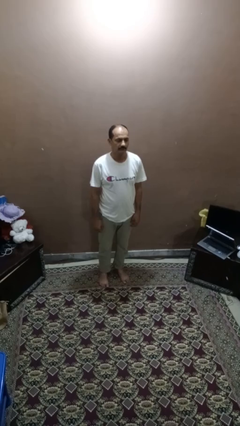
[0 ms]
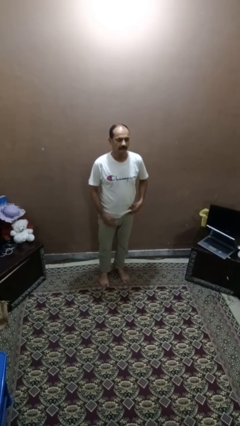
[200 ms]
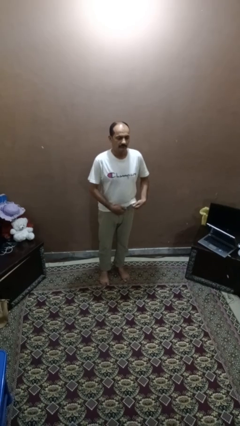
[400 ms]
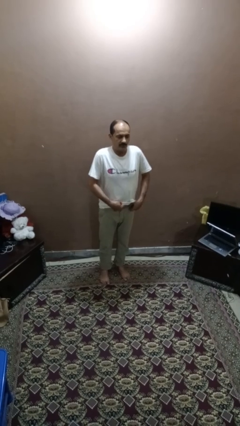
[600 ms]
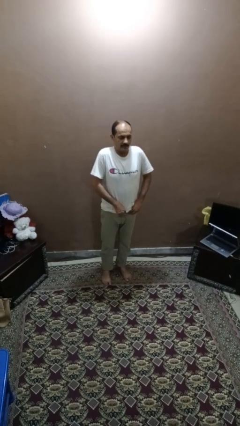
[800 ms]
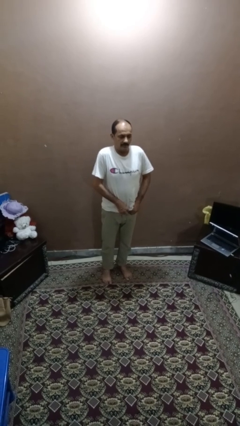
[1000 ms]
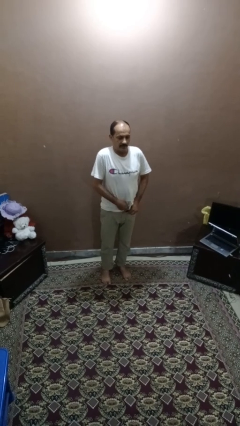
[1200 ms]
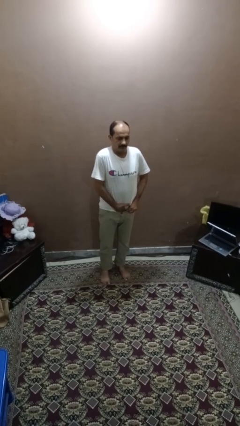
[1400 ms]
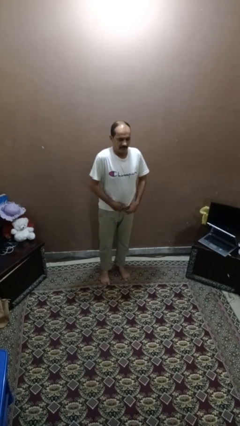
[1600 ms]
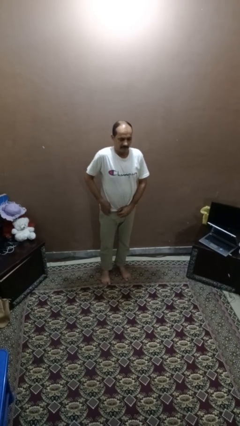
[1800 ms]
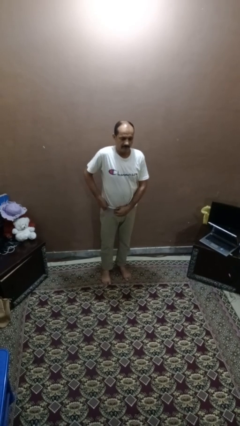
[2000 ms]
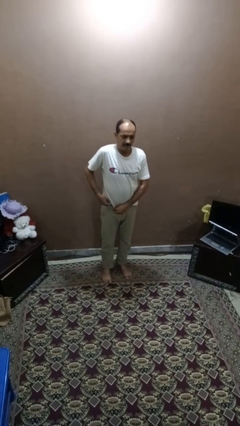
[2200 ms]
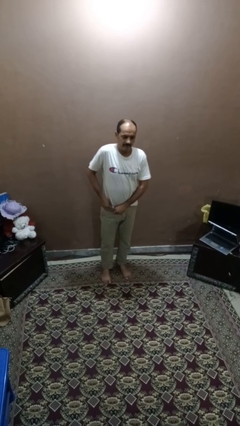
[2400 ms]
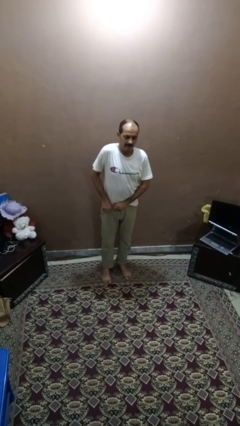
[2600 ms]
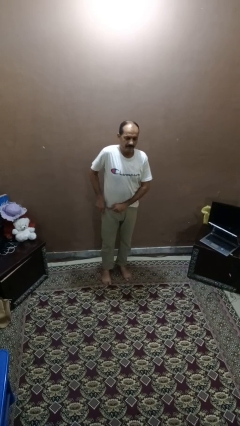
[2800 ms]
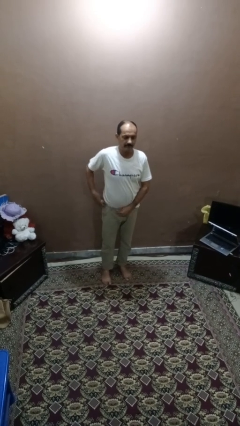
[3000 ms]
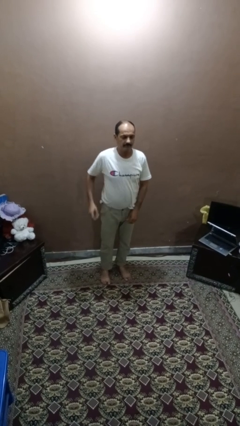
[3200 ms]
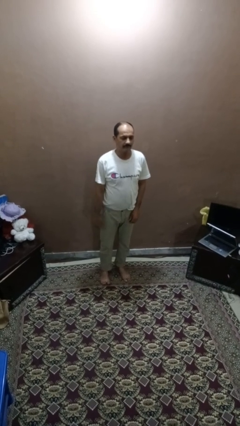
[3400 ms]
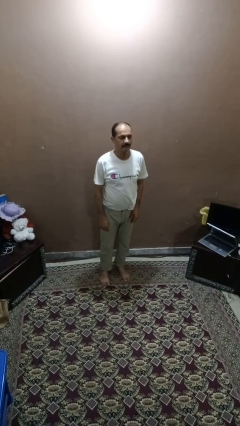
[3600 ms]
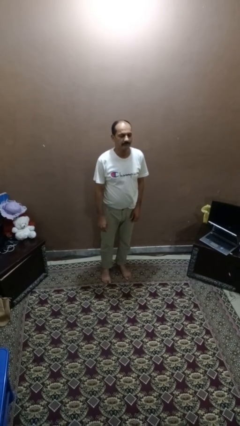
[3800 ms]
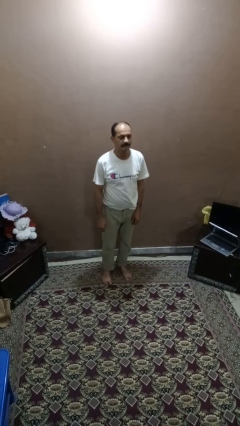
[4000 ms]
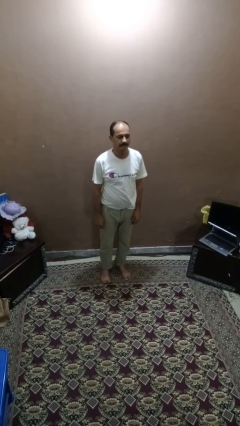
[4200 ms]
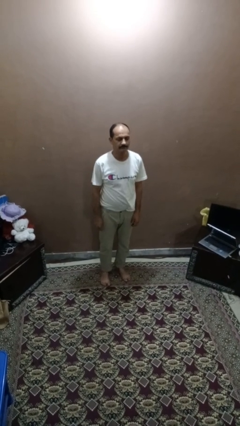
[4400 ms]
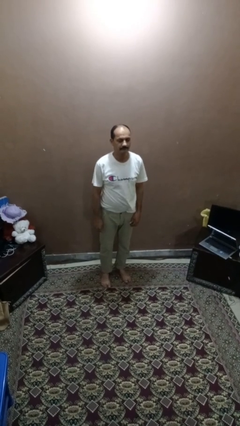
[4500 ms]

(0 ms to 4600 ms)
person tucks in shirt

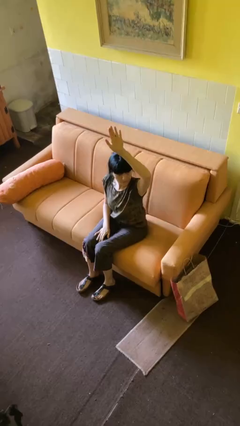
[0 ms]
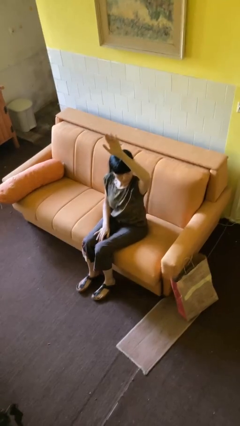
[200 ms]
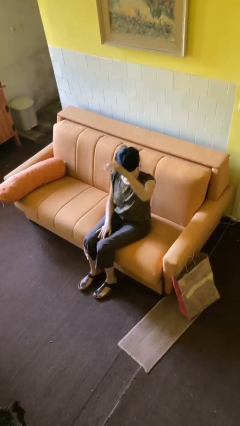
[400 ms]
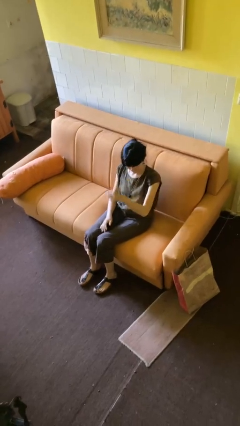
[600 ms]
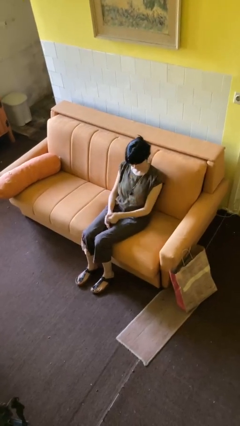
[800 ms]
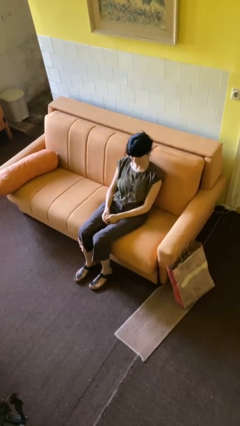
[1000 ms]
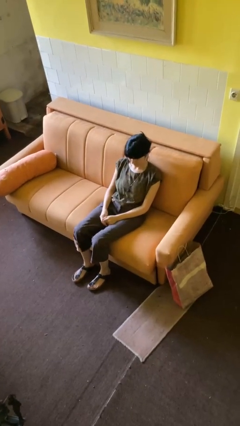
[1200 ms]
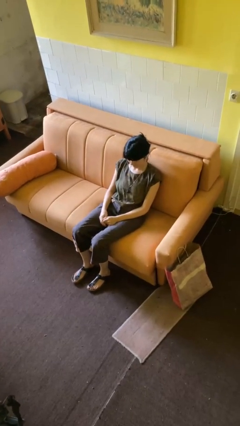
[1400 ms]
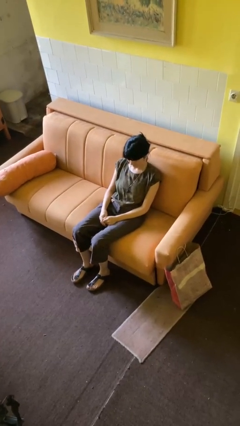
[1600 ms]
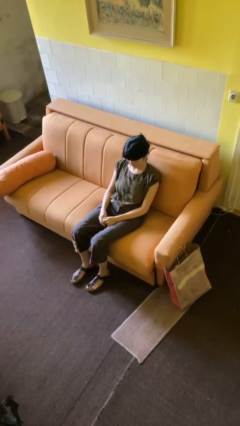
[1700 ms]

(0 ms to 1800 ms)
person gestures lower hand

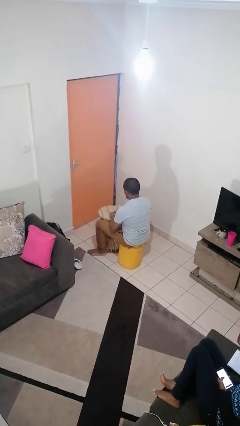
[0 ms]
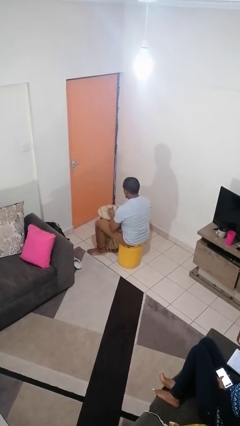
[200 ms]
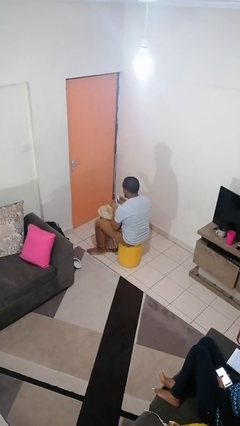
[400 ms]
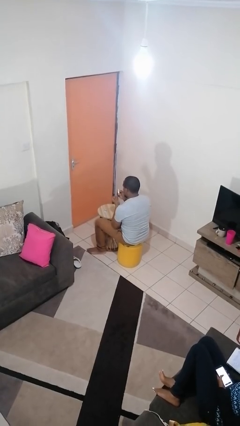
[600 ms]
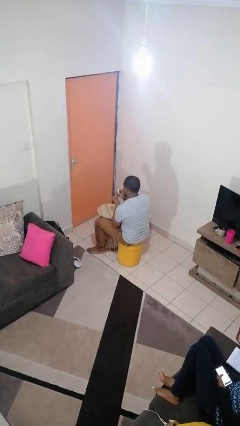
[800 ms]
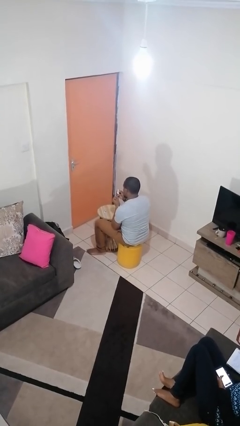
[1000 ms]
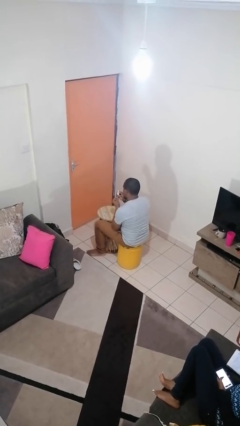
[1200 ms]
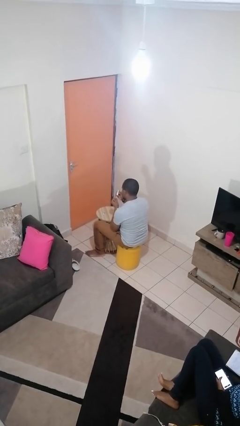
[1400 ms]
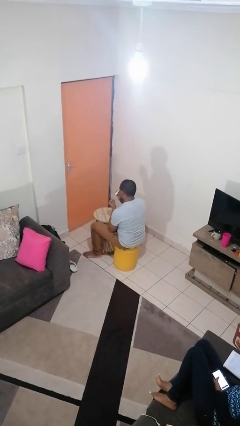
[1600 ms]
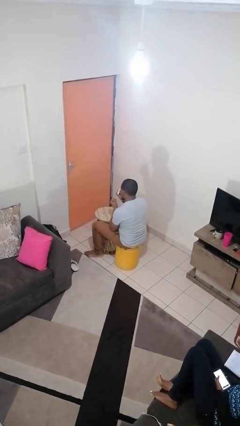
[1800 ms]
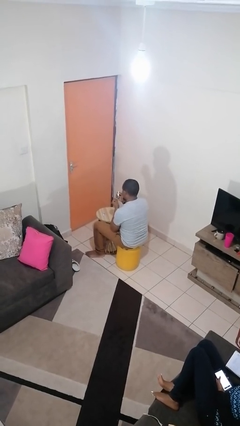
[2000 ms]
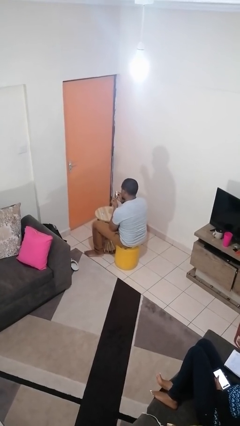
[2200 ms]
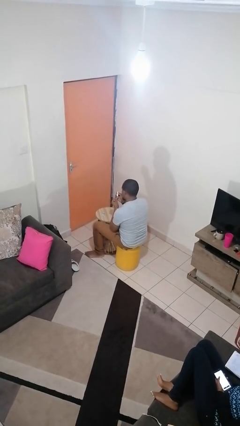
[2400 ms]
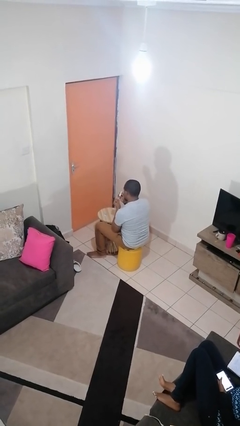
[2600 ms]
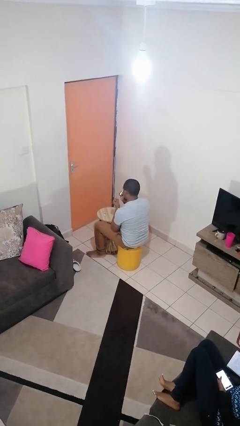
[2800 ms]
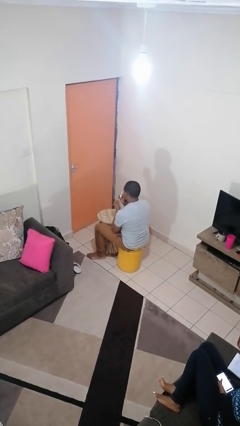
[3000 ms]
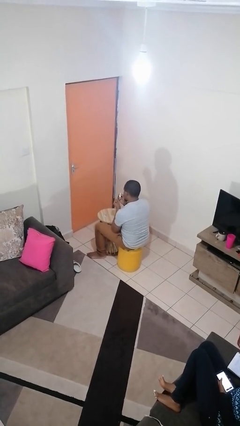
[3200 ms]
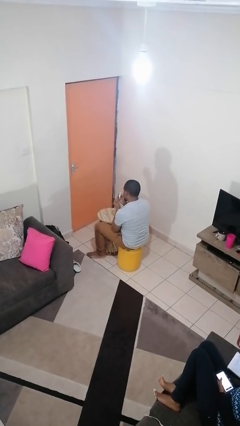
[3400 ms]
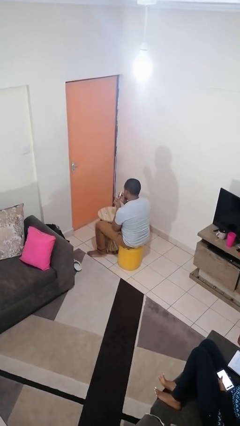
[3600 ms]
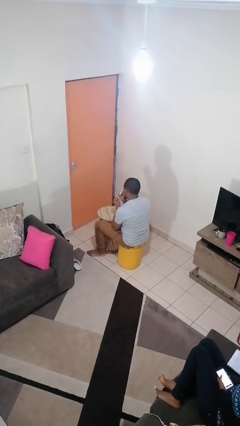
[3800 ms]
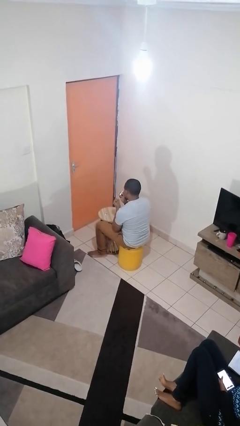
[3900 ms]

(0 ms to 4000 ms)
person paints fingernails

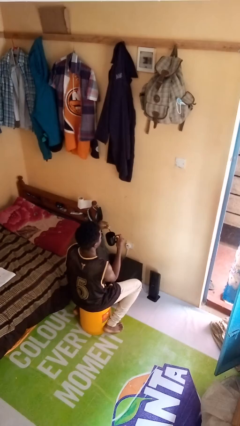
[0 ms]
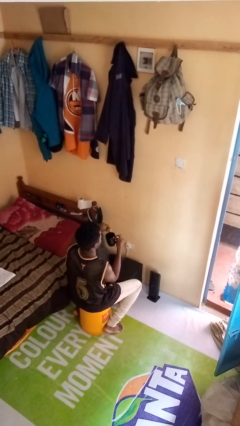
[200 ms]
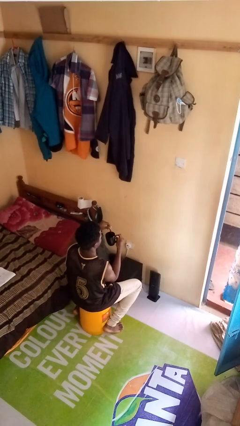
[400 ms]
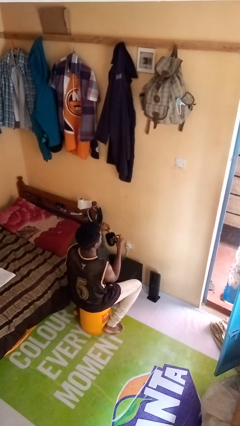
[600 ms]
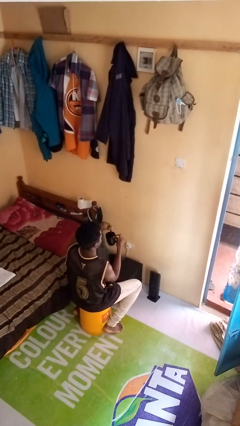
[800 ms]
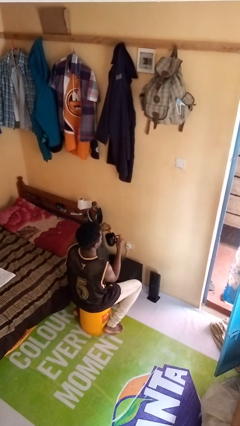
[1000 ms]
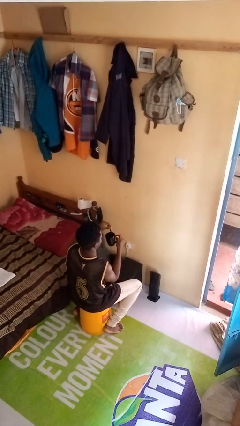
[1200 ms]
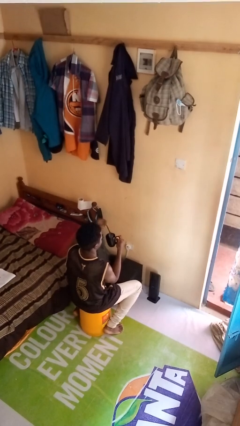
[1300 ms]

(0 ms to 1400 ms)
person stirs mug

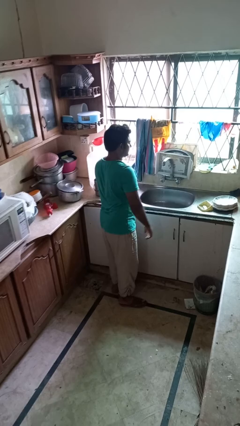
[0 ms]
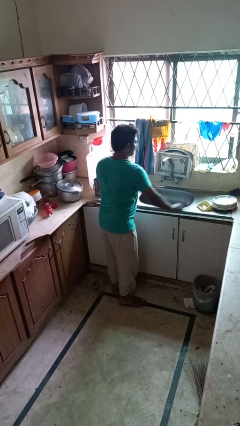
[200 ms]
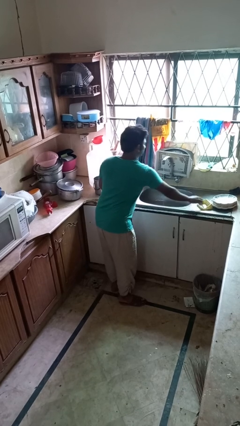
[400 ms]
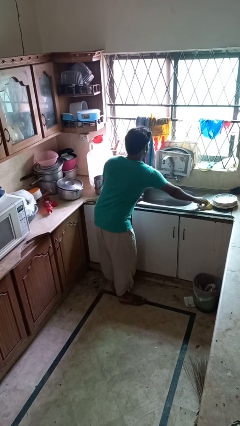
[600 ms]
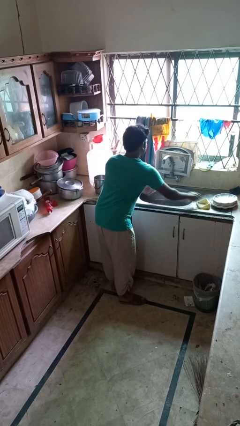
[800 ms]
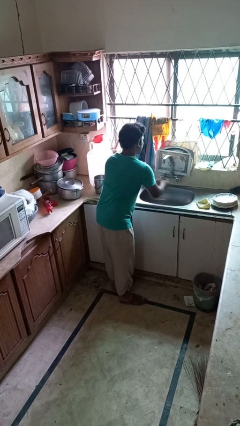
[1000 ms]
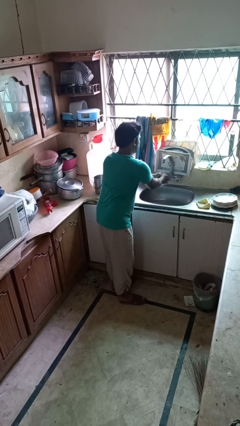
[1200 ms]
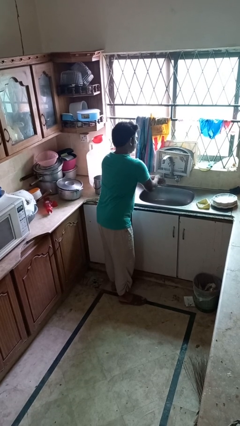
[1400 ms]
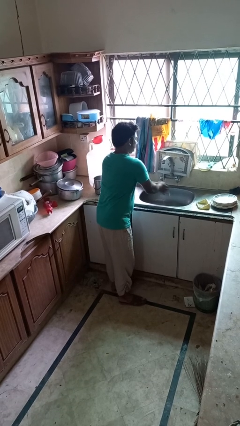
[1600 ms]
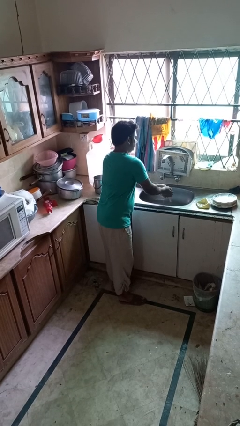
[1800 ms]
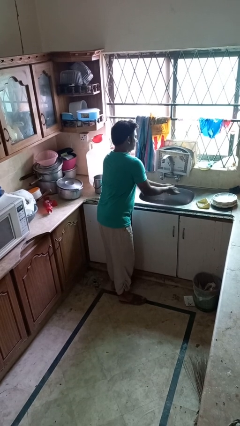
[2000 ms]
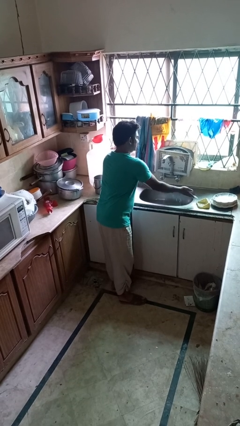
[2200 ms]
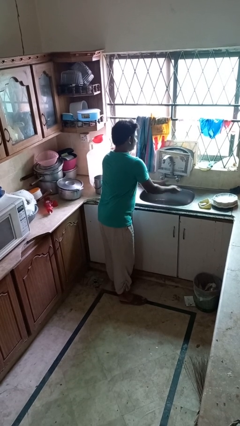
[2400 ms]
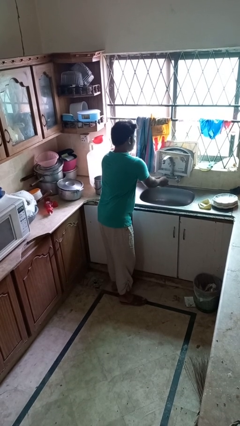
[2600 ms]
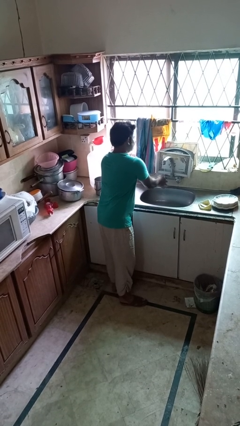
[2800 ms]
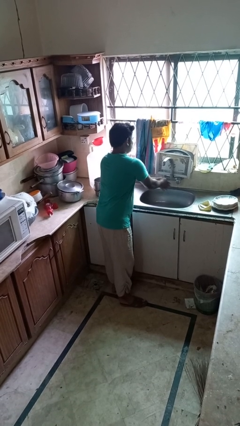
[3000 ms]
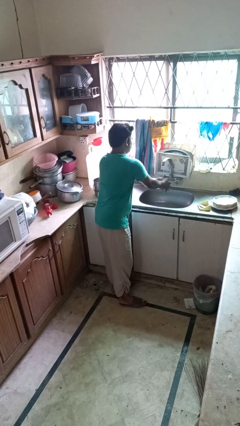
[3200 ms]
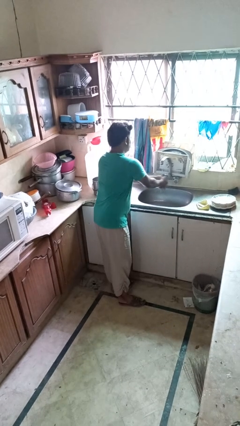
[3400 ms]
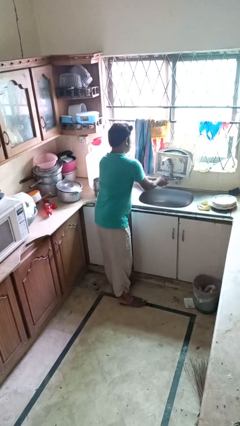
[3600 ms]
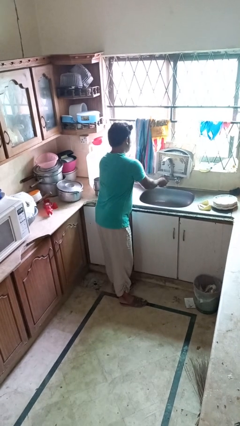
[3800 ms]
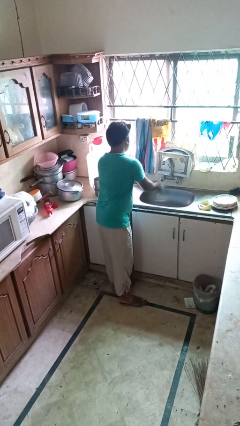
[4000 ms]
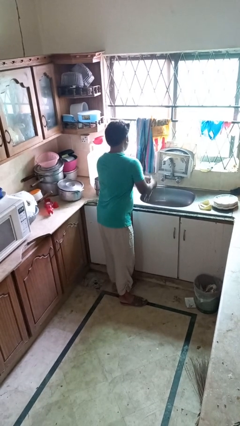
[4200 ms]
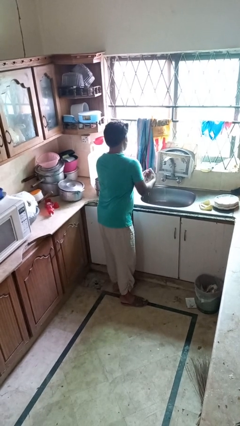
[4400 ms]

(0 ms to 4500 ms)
person washes hands

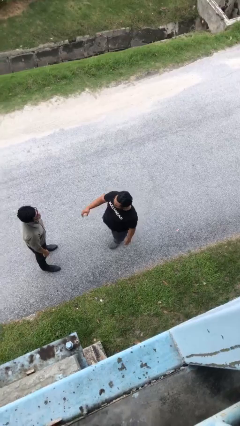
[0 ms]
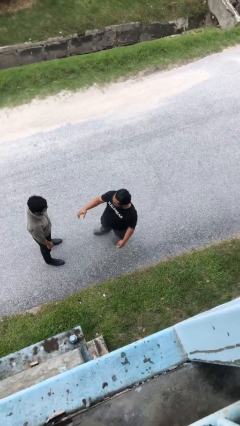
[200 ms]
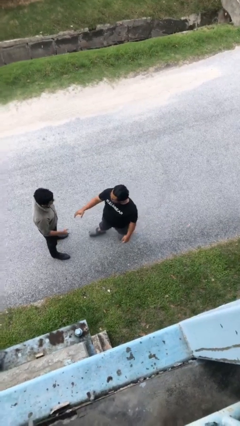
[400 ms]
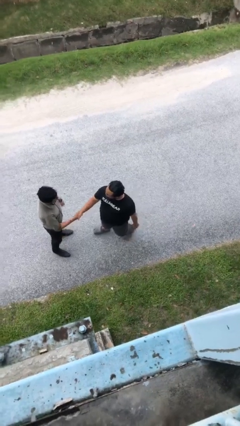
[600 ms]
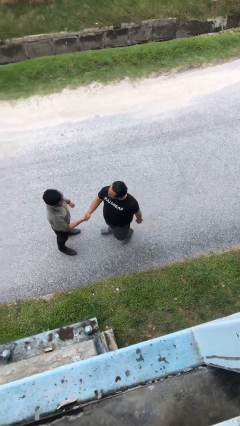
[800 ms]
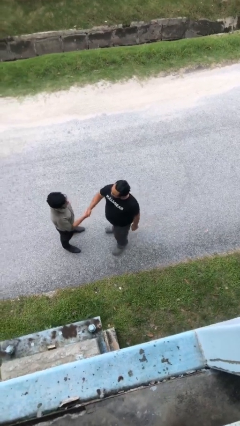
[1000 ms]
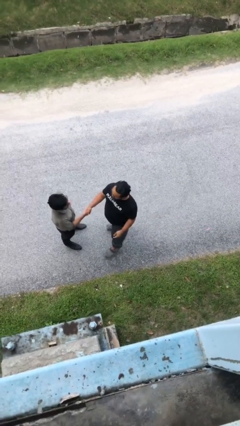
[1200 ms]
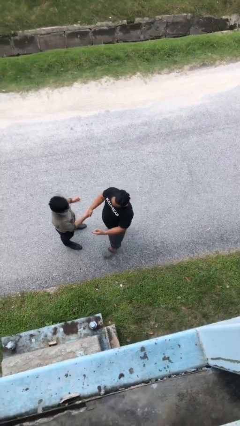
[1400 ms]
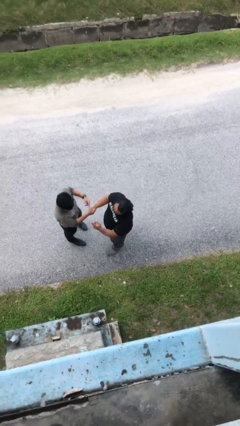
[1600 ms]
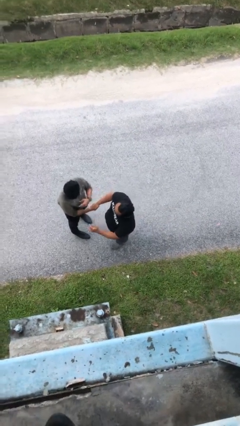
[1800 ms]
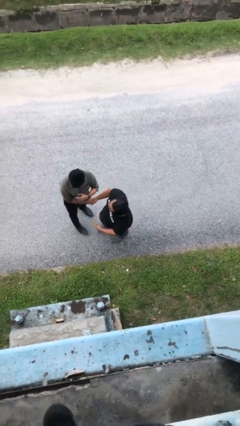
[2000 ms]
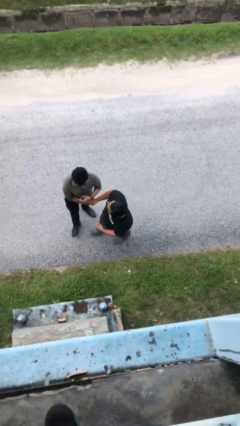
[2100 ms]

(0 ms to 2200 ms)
person shakes hand
